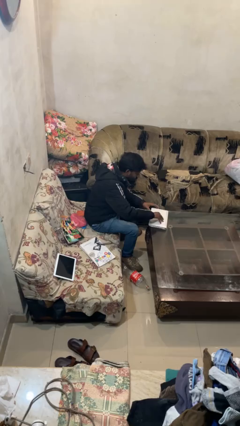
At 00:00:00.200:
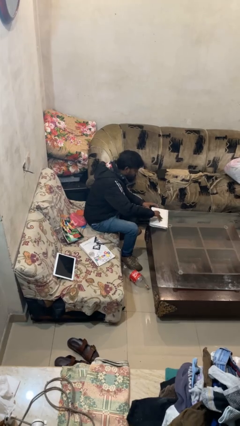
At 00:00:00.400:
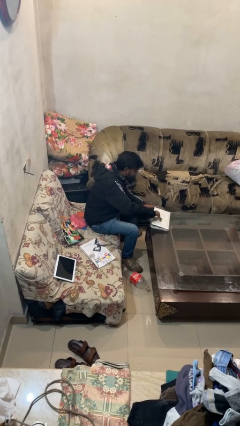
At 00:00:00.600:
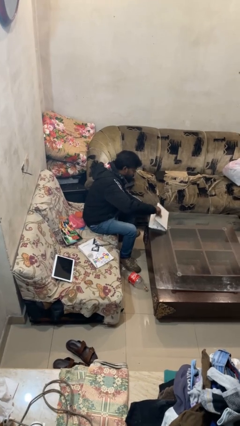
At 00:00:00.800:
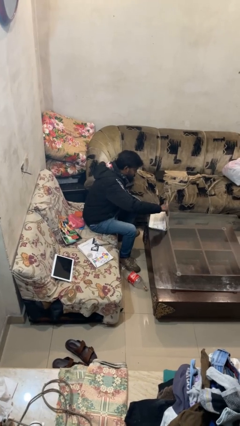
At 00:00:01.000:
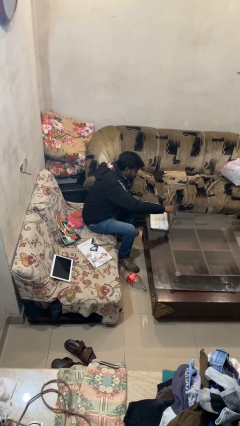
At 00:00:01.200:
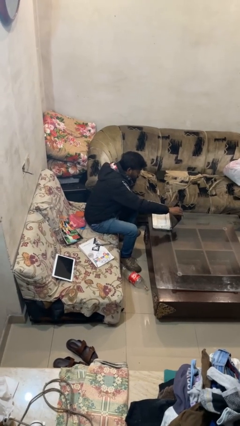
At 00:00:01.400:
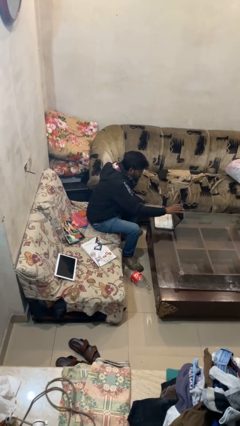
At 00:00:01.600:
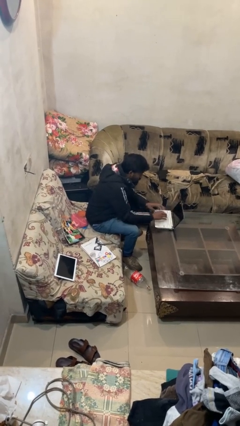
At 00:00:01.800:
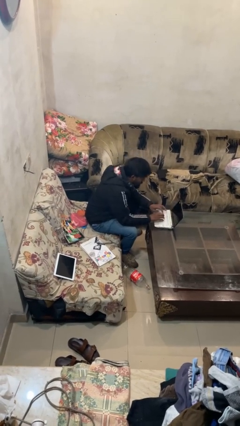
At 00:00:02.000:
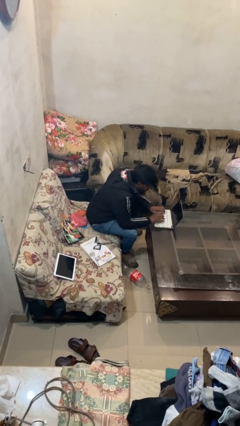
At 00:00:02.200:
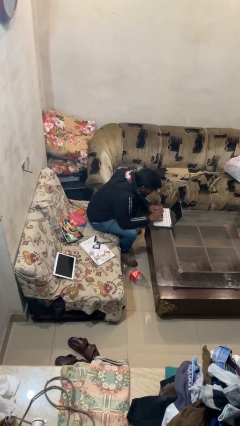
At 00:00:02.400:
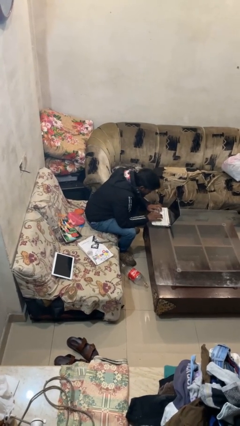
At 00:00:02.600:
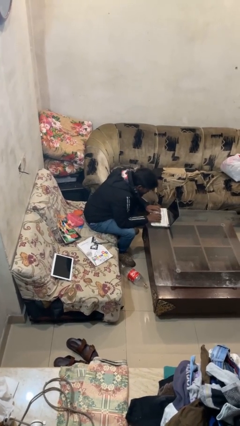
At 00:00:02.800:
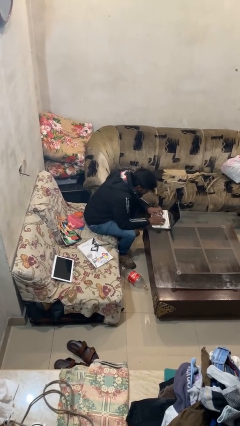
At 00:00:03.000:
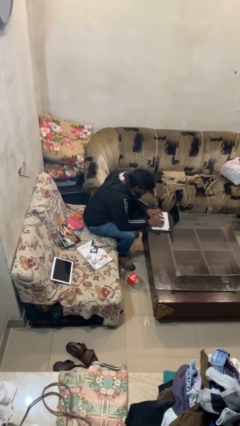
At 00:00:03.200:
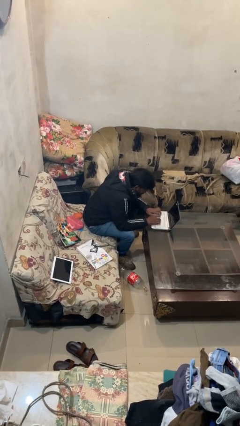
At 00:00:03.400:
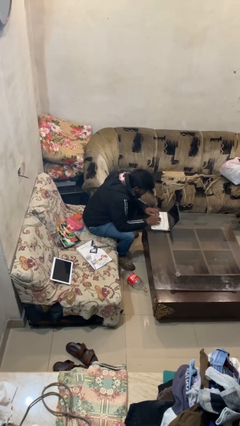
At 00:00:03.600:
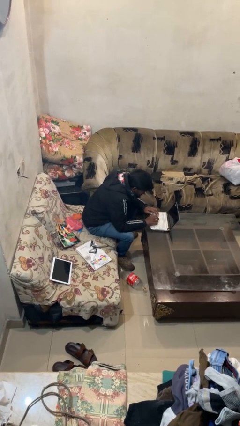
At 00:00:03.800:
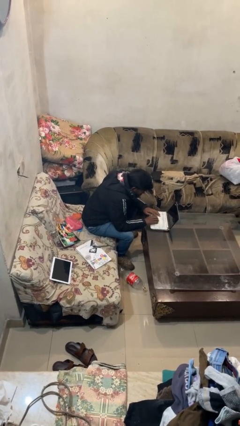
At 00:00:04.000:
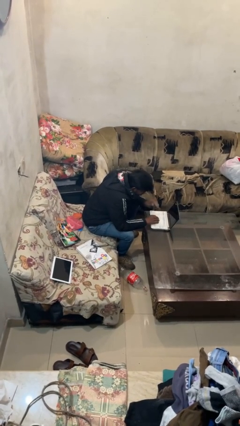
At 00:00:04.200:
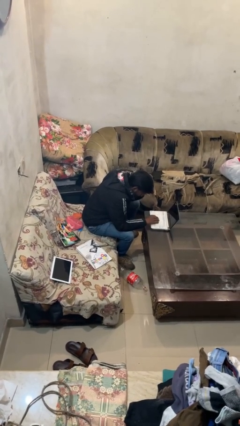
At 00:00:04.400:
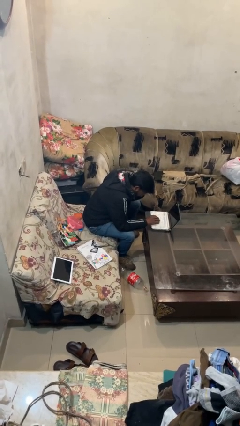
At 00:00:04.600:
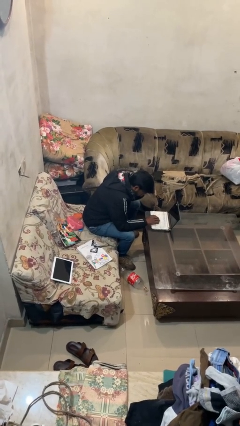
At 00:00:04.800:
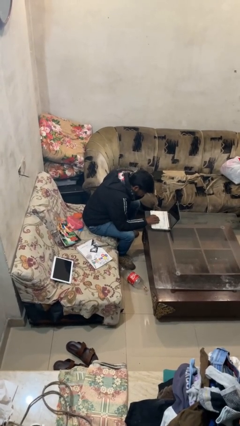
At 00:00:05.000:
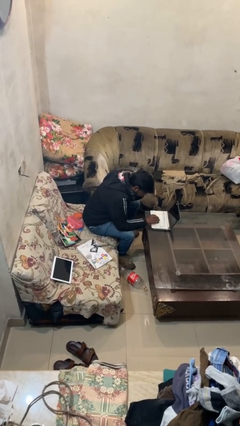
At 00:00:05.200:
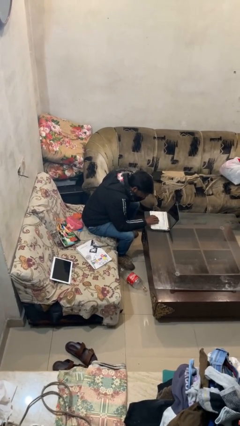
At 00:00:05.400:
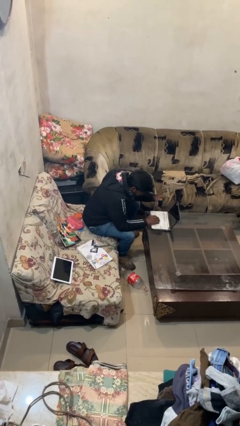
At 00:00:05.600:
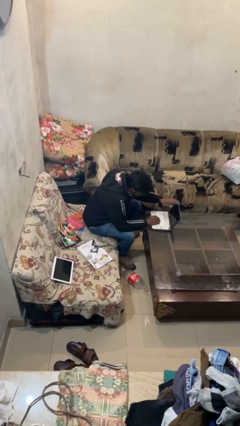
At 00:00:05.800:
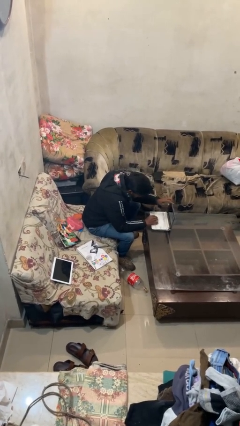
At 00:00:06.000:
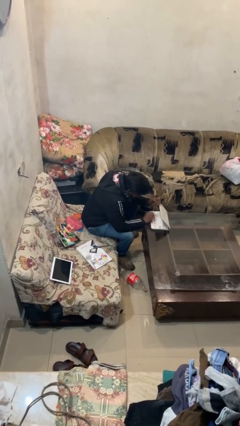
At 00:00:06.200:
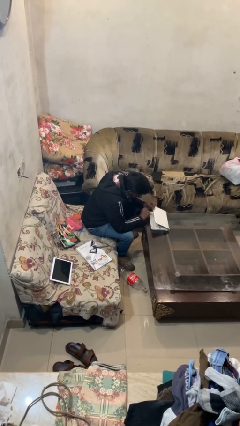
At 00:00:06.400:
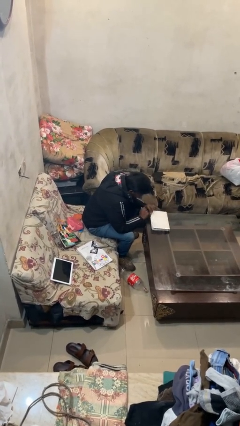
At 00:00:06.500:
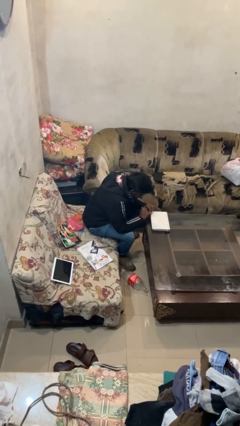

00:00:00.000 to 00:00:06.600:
person interacts with laptop

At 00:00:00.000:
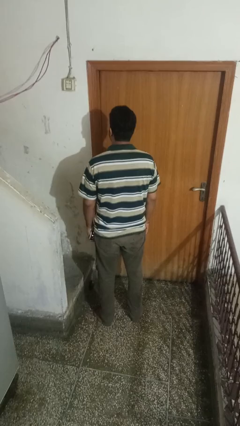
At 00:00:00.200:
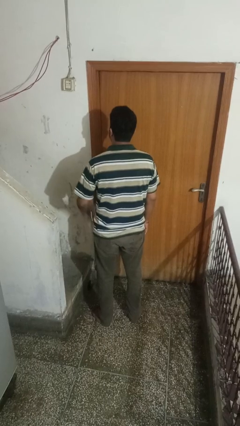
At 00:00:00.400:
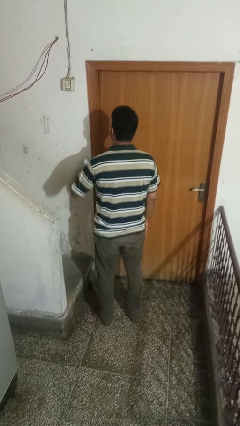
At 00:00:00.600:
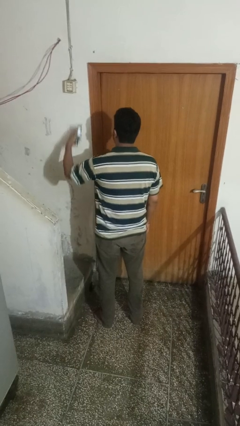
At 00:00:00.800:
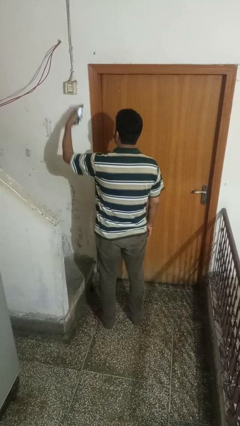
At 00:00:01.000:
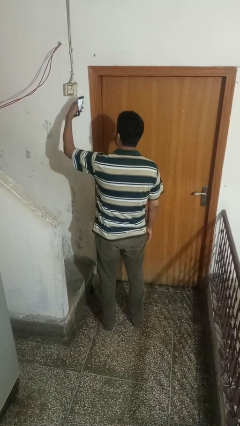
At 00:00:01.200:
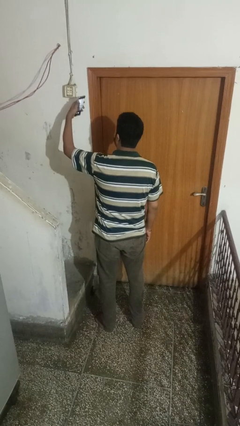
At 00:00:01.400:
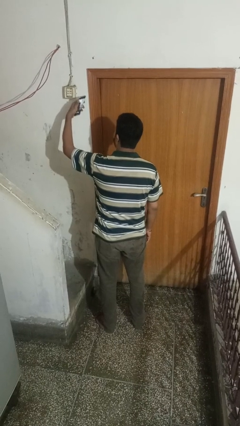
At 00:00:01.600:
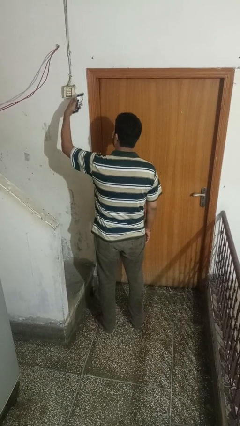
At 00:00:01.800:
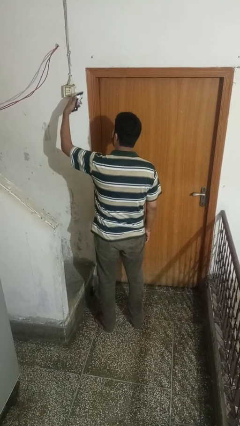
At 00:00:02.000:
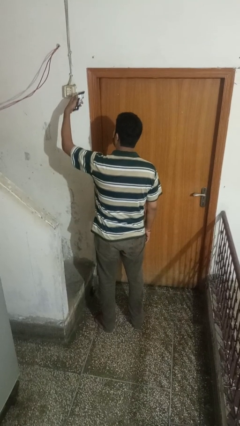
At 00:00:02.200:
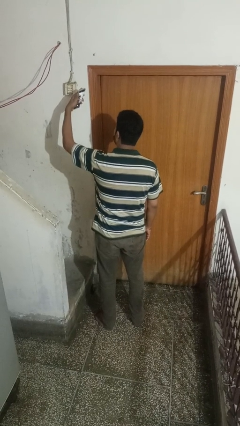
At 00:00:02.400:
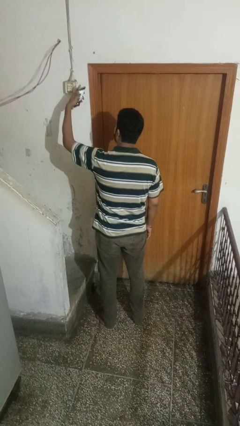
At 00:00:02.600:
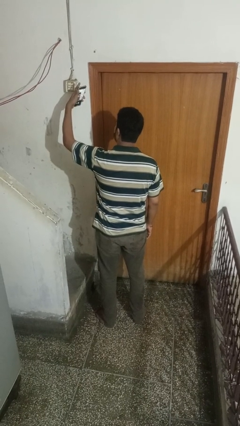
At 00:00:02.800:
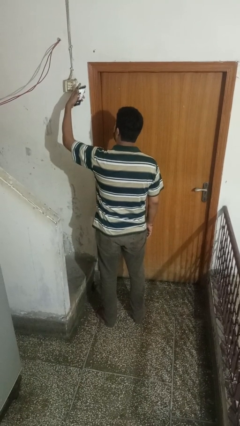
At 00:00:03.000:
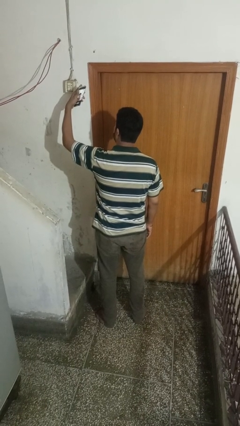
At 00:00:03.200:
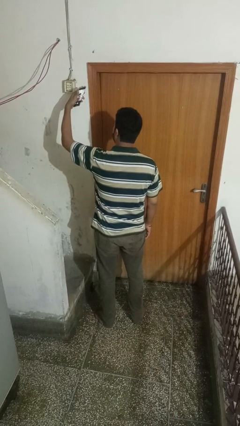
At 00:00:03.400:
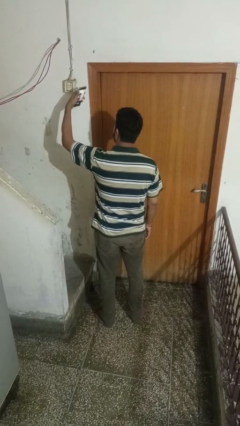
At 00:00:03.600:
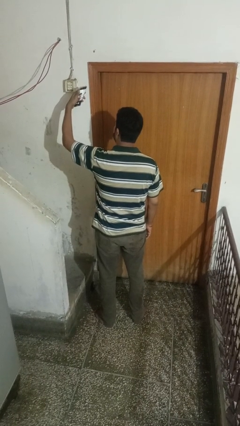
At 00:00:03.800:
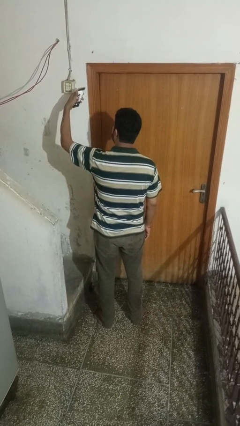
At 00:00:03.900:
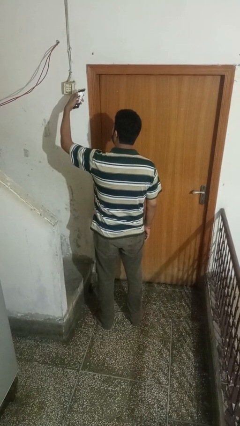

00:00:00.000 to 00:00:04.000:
person takes selfie

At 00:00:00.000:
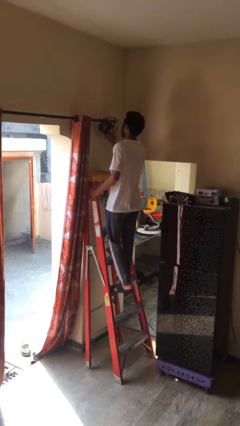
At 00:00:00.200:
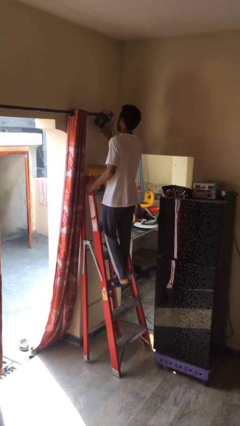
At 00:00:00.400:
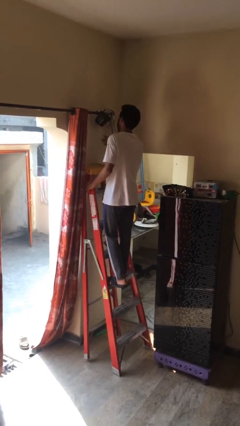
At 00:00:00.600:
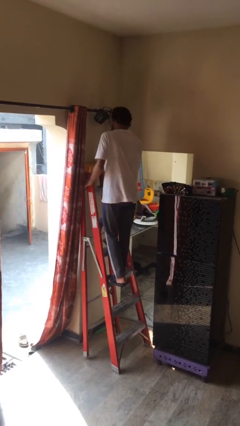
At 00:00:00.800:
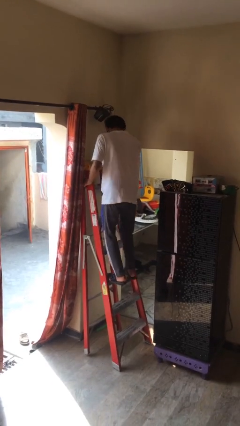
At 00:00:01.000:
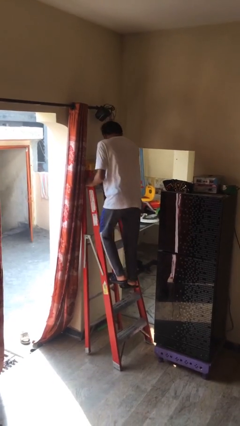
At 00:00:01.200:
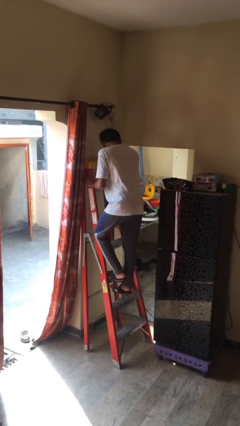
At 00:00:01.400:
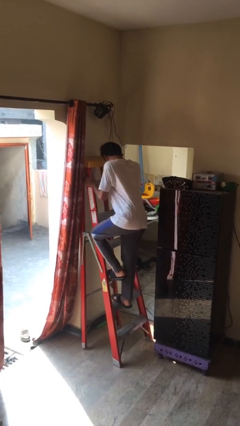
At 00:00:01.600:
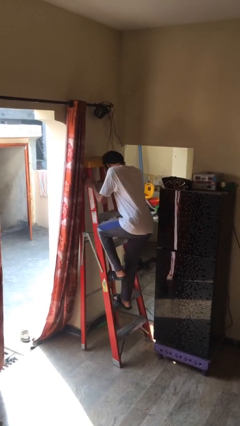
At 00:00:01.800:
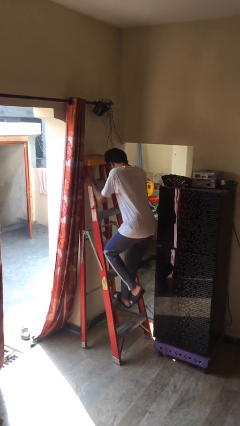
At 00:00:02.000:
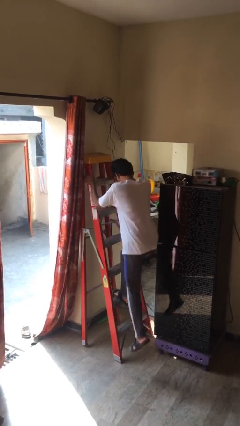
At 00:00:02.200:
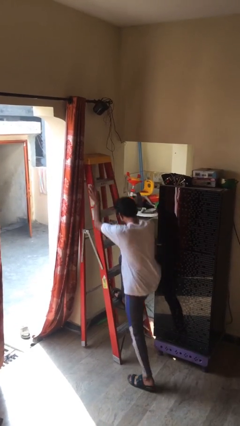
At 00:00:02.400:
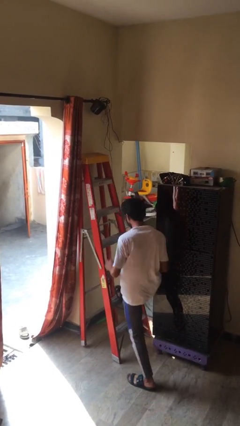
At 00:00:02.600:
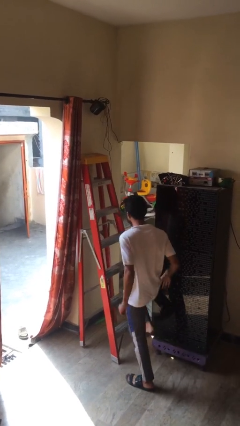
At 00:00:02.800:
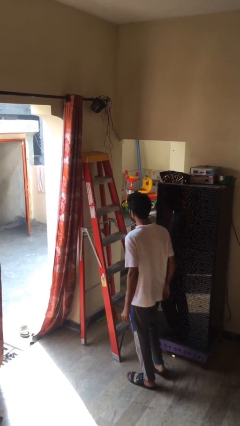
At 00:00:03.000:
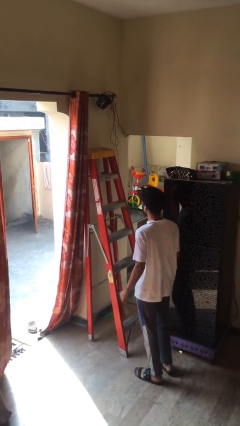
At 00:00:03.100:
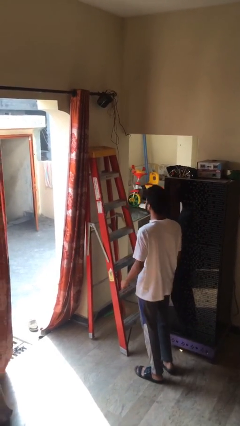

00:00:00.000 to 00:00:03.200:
person climbs down ladder

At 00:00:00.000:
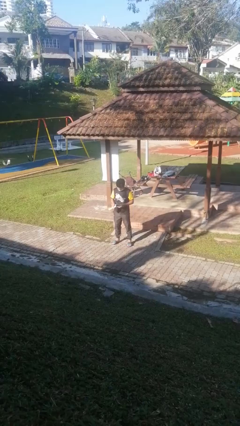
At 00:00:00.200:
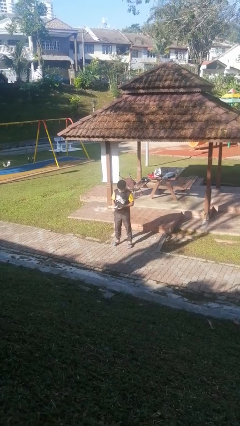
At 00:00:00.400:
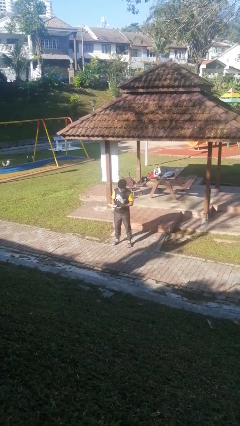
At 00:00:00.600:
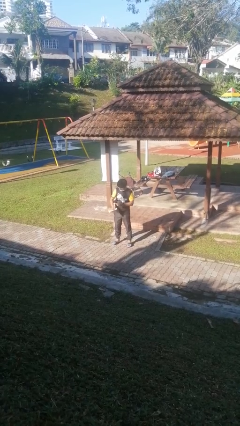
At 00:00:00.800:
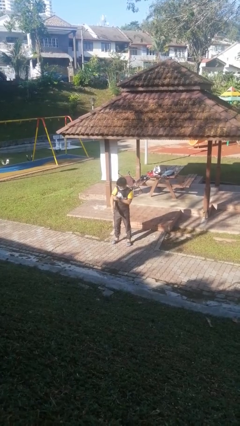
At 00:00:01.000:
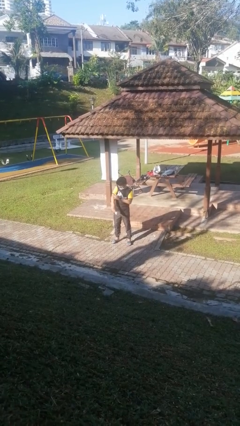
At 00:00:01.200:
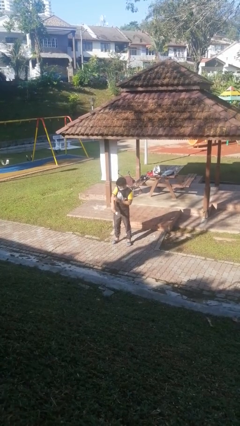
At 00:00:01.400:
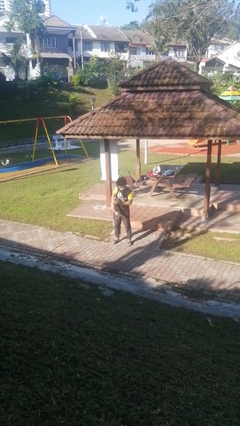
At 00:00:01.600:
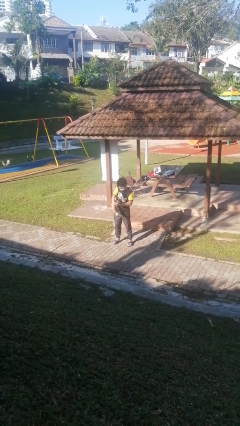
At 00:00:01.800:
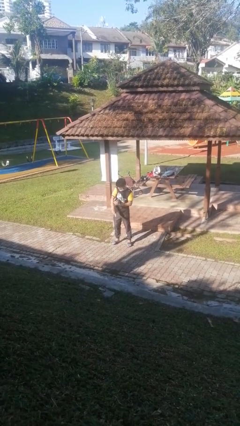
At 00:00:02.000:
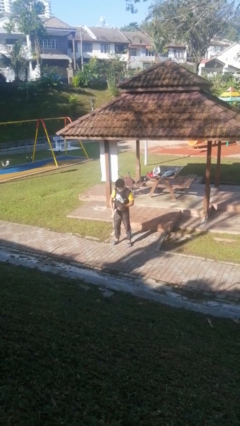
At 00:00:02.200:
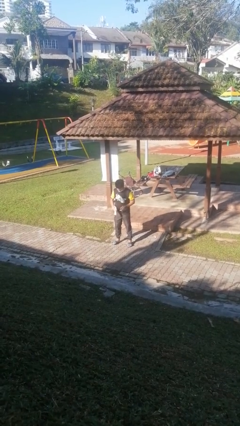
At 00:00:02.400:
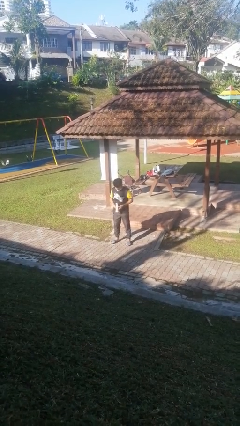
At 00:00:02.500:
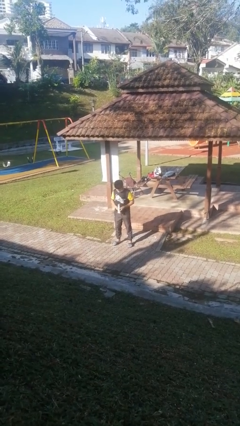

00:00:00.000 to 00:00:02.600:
person applies sunscreen
